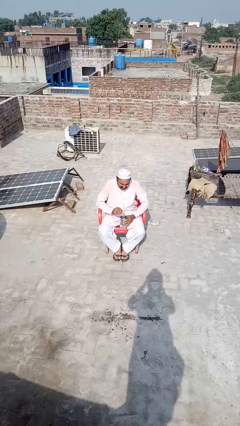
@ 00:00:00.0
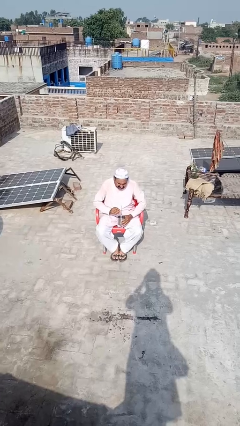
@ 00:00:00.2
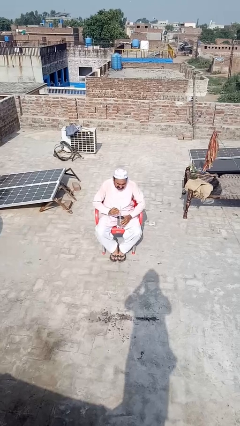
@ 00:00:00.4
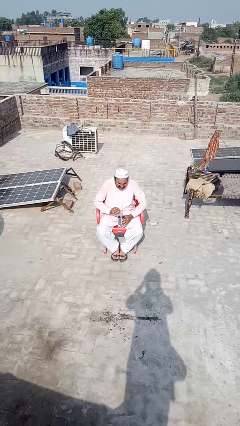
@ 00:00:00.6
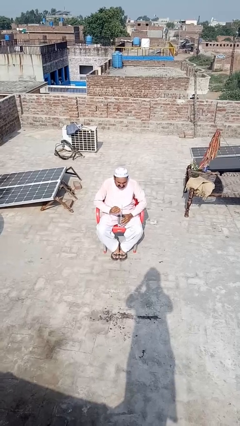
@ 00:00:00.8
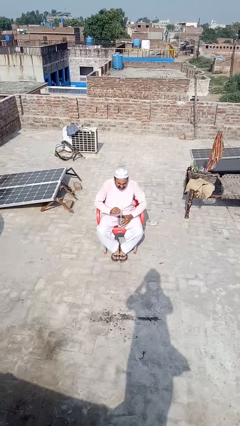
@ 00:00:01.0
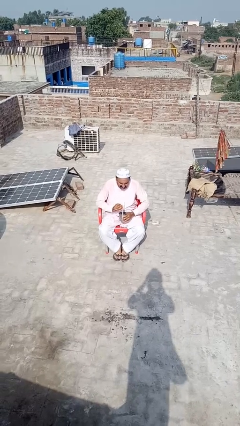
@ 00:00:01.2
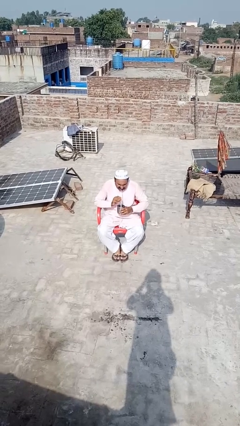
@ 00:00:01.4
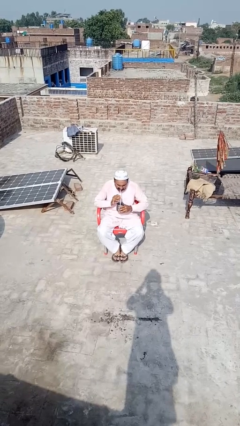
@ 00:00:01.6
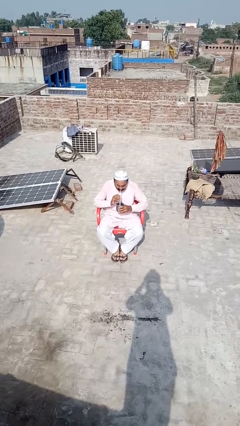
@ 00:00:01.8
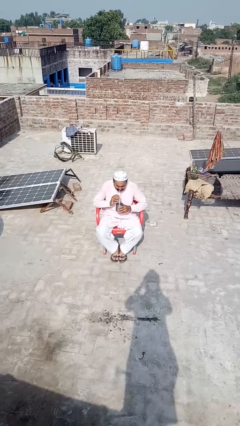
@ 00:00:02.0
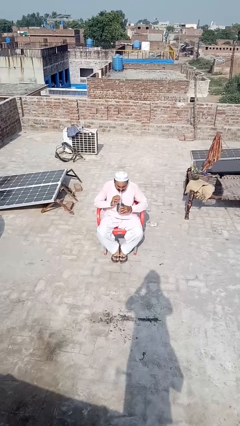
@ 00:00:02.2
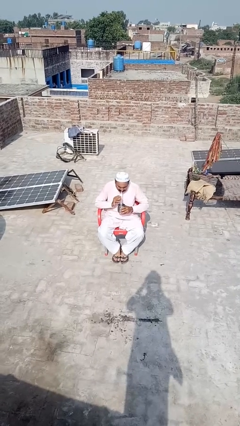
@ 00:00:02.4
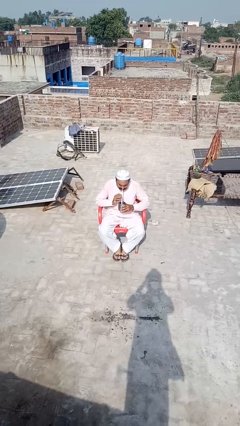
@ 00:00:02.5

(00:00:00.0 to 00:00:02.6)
person drinks from straw

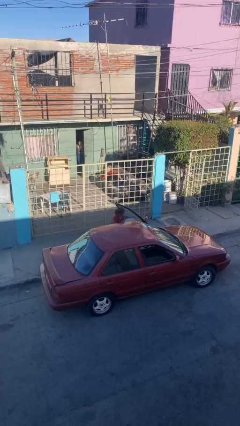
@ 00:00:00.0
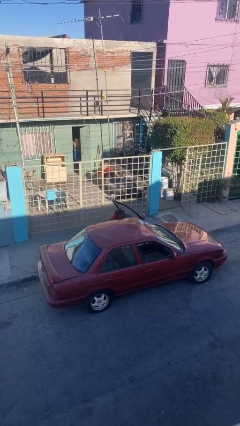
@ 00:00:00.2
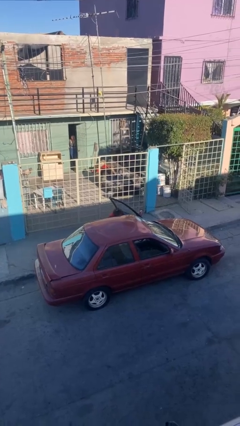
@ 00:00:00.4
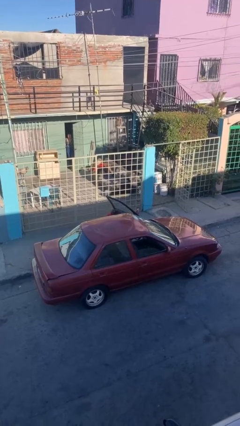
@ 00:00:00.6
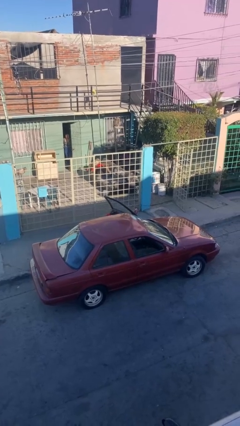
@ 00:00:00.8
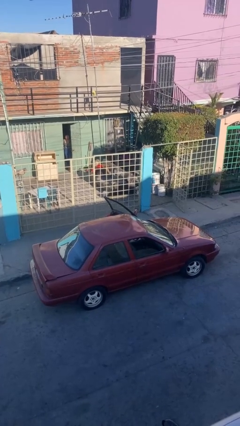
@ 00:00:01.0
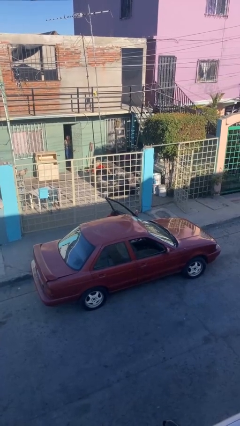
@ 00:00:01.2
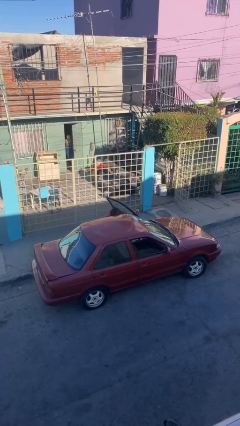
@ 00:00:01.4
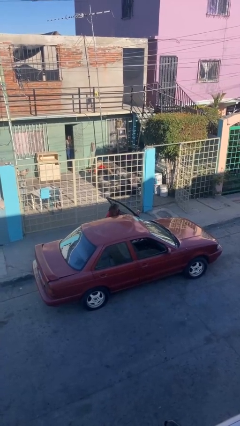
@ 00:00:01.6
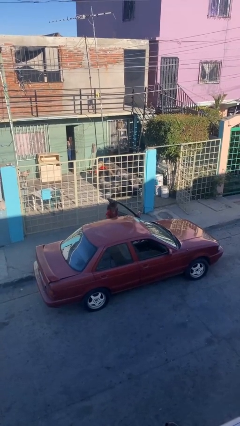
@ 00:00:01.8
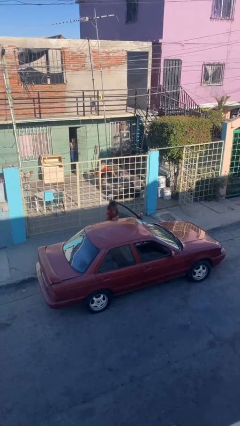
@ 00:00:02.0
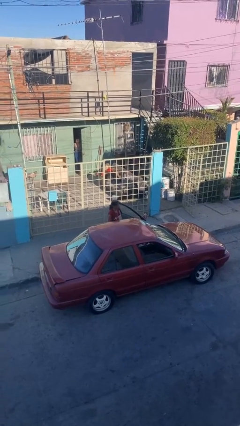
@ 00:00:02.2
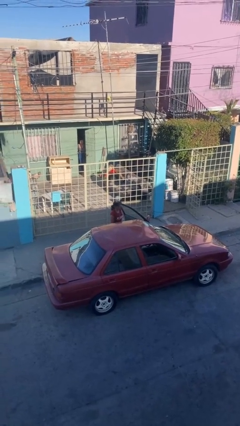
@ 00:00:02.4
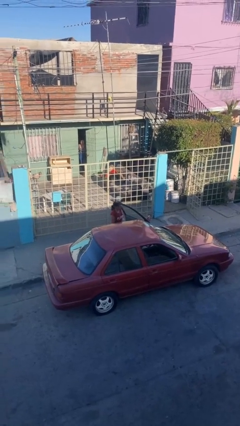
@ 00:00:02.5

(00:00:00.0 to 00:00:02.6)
person loads car

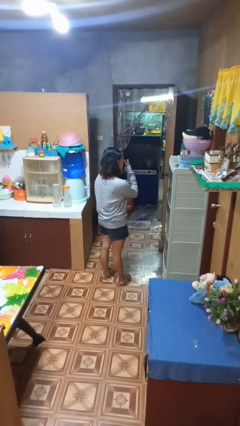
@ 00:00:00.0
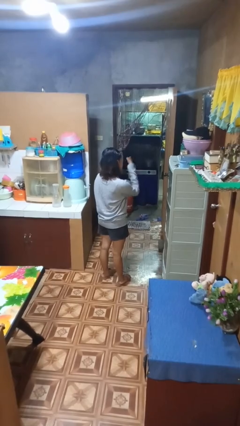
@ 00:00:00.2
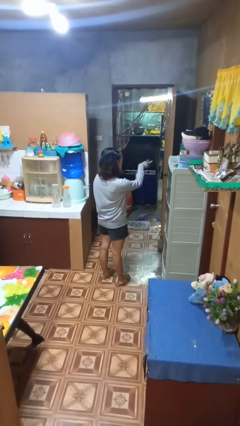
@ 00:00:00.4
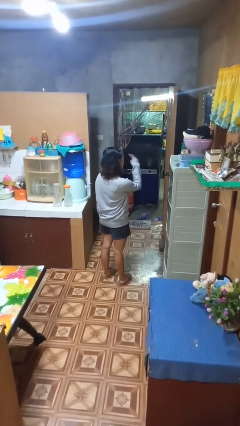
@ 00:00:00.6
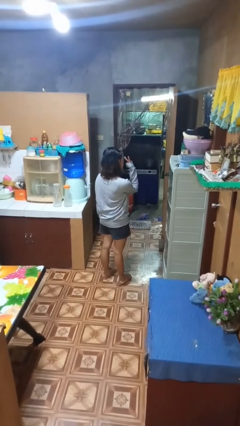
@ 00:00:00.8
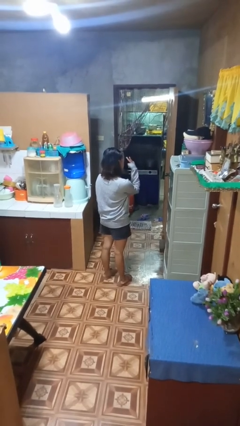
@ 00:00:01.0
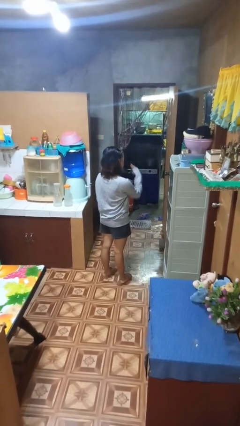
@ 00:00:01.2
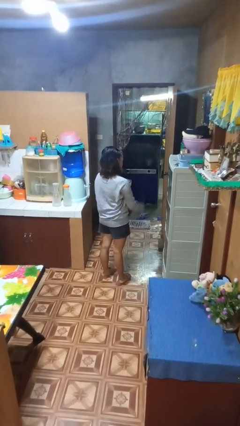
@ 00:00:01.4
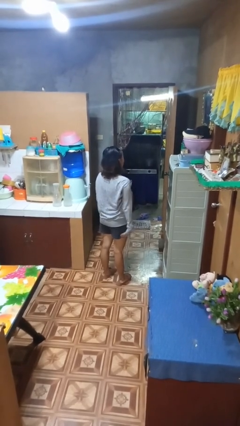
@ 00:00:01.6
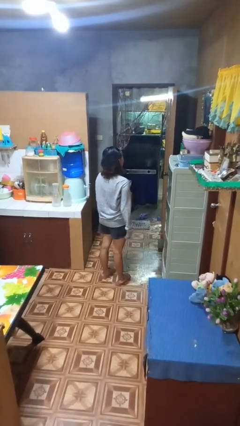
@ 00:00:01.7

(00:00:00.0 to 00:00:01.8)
person gestures watch closely

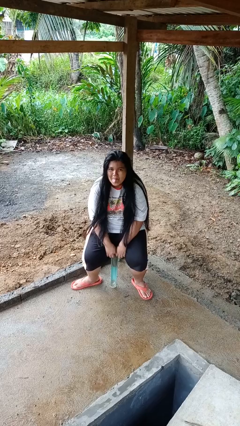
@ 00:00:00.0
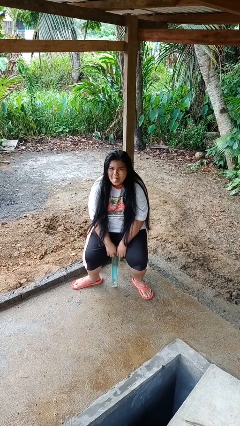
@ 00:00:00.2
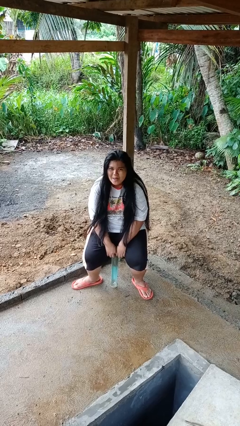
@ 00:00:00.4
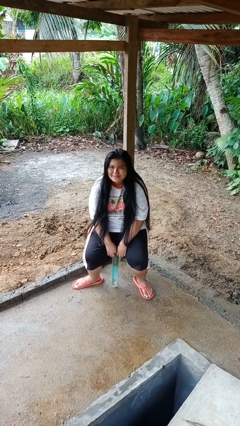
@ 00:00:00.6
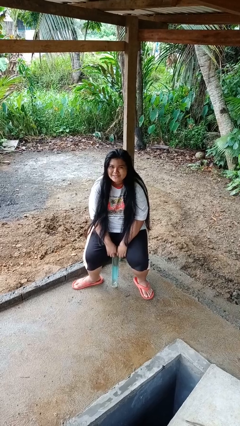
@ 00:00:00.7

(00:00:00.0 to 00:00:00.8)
person sticks out tongue

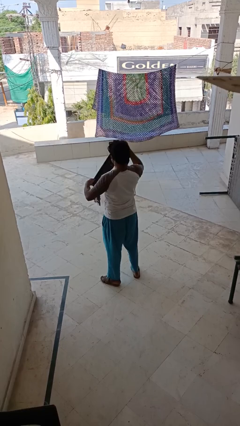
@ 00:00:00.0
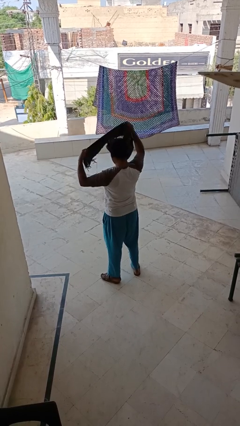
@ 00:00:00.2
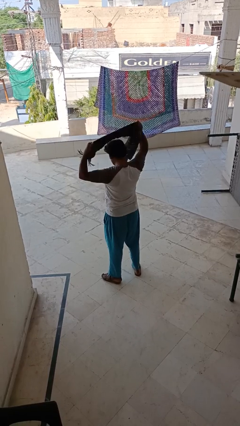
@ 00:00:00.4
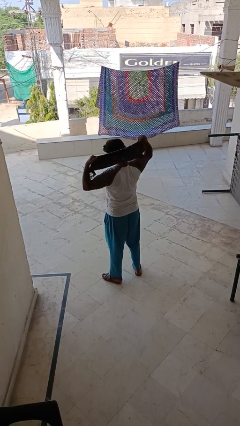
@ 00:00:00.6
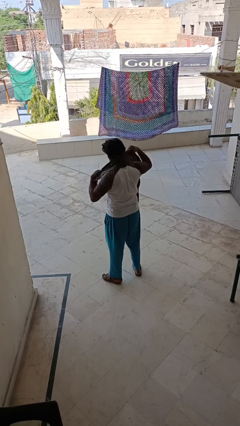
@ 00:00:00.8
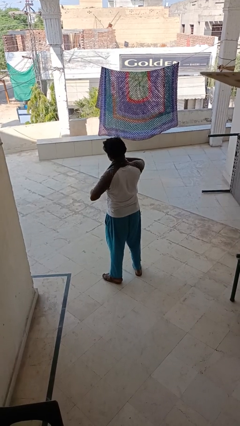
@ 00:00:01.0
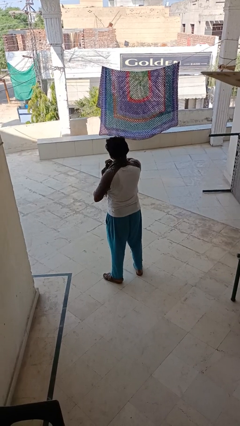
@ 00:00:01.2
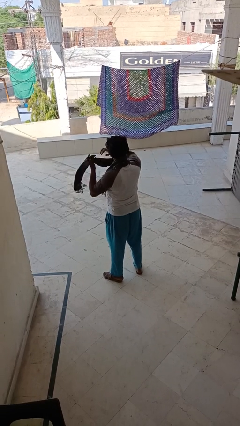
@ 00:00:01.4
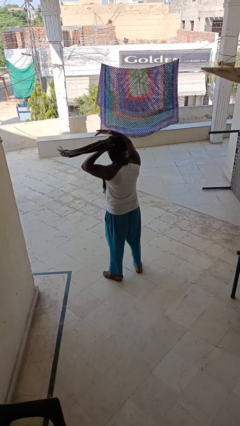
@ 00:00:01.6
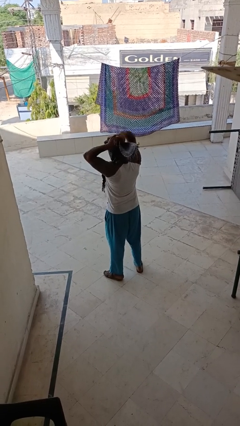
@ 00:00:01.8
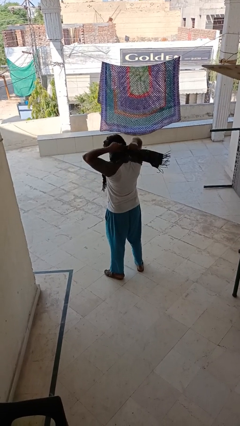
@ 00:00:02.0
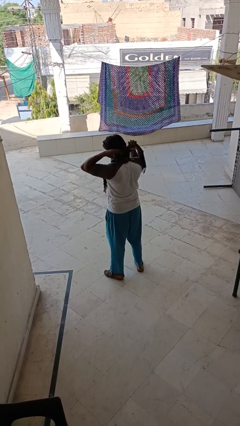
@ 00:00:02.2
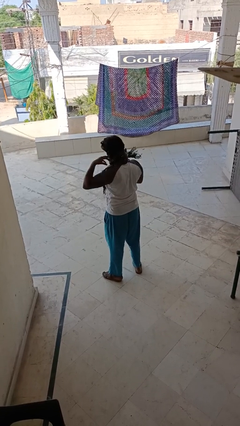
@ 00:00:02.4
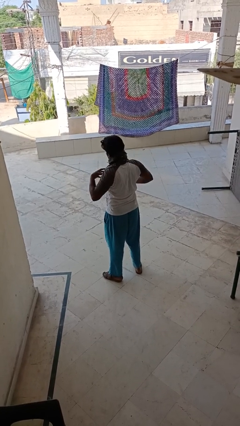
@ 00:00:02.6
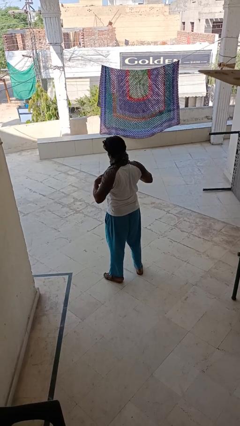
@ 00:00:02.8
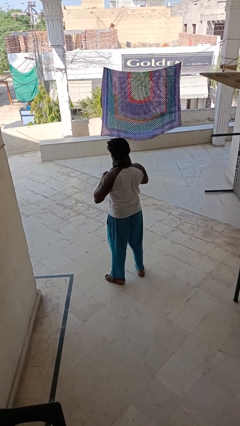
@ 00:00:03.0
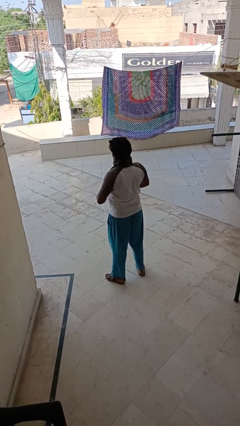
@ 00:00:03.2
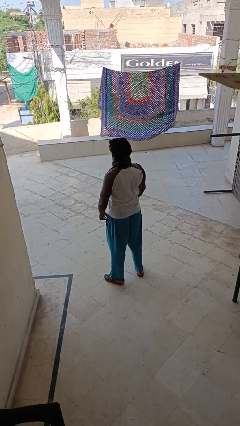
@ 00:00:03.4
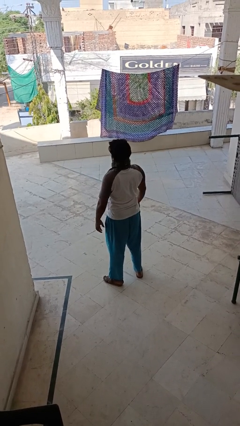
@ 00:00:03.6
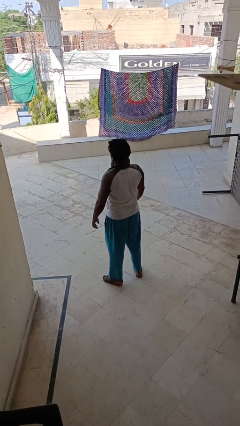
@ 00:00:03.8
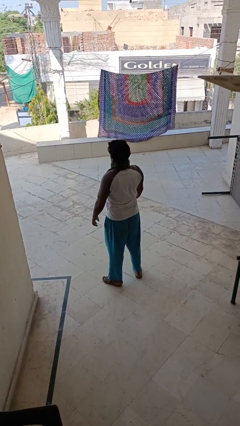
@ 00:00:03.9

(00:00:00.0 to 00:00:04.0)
person puts on scarf

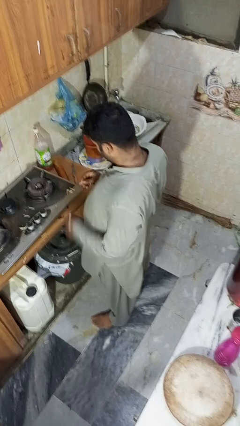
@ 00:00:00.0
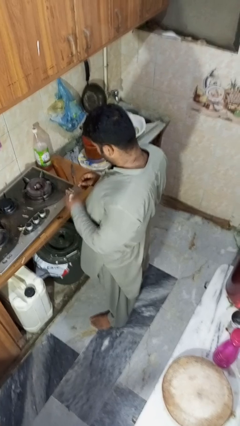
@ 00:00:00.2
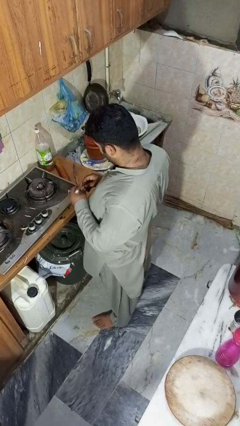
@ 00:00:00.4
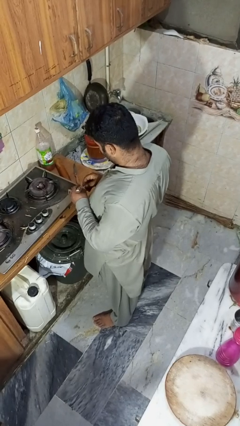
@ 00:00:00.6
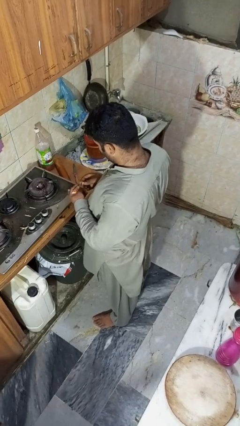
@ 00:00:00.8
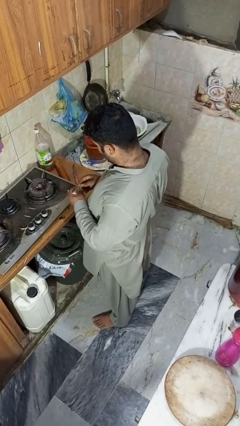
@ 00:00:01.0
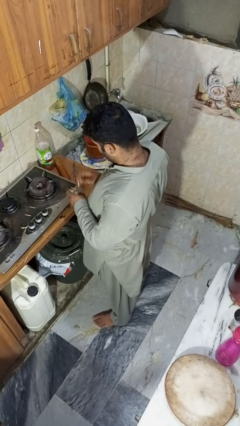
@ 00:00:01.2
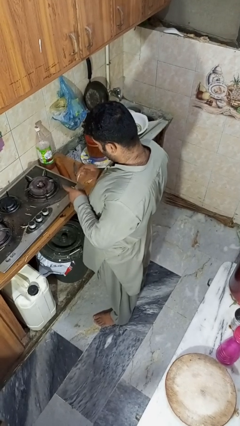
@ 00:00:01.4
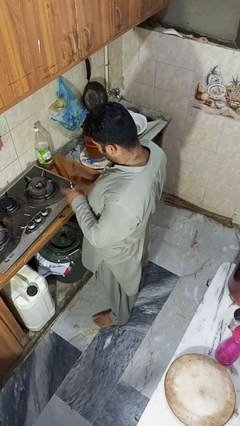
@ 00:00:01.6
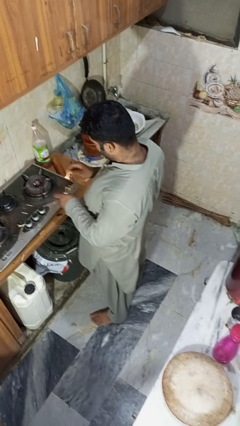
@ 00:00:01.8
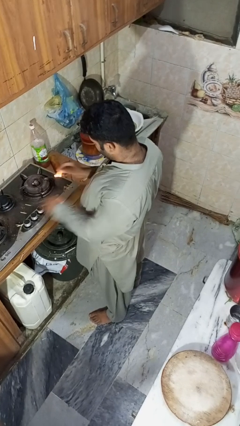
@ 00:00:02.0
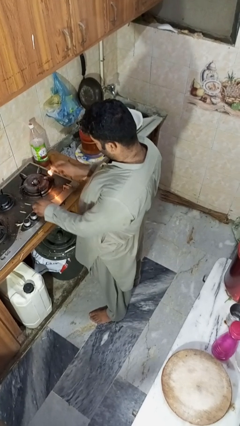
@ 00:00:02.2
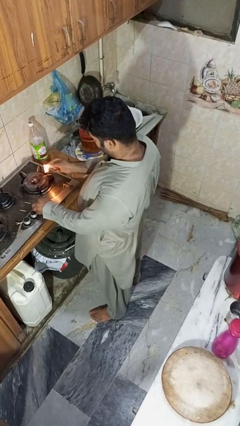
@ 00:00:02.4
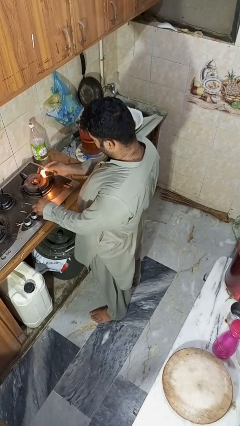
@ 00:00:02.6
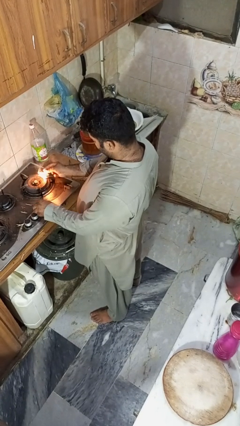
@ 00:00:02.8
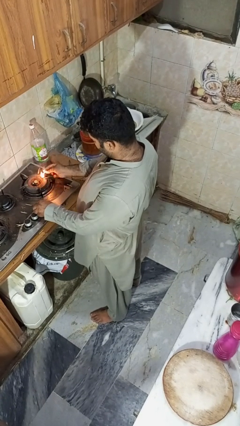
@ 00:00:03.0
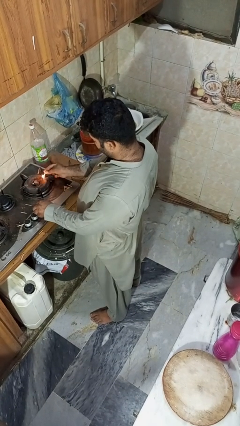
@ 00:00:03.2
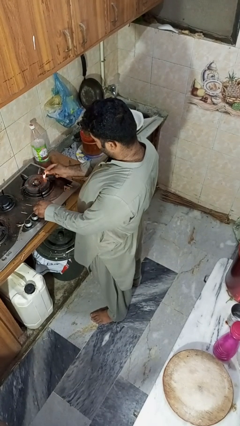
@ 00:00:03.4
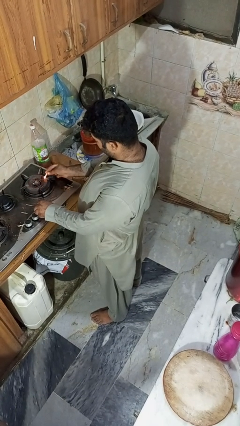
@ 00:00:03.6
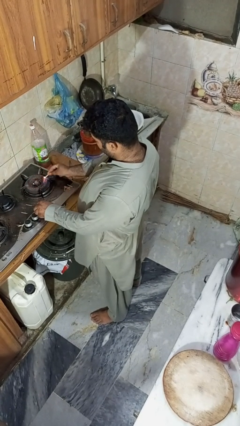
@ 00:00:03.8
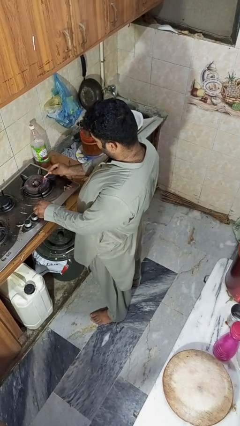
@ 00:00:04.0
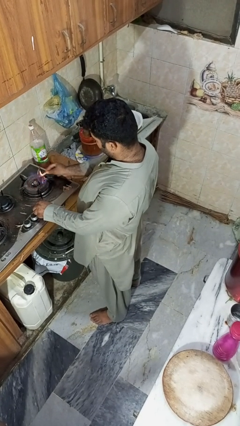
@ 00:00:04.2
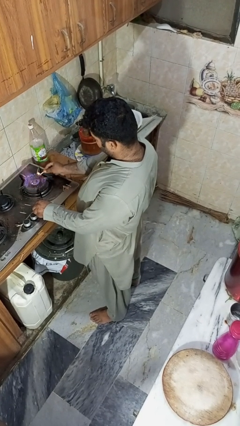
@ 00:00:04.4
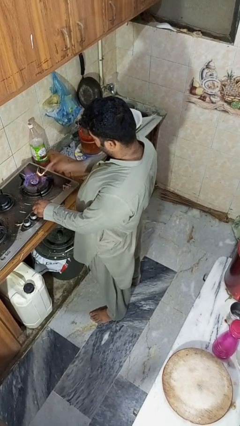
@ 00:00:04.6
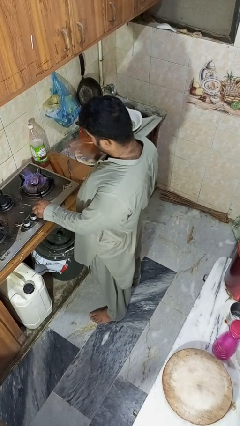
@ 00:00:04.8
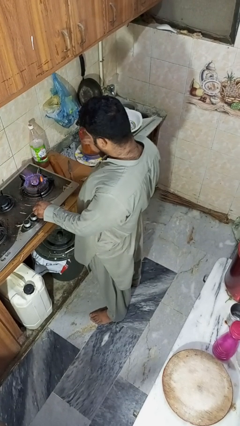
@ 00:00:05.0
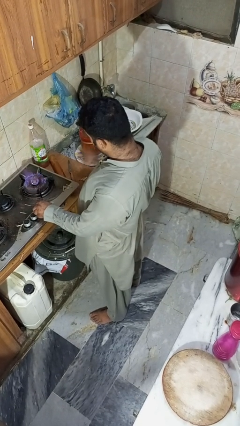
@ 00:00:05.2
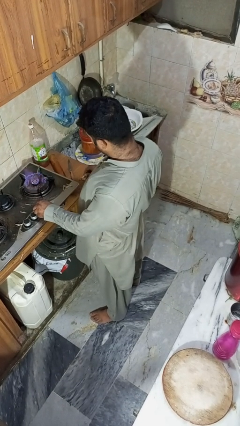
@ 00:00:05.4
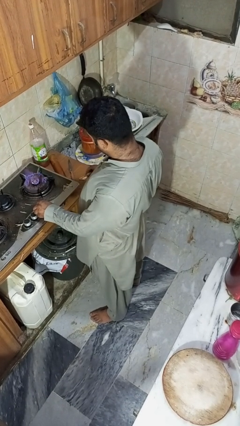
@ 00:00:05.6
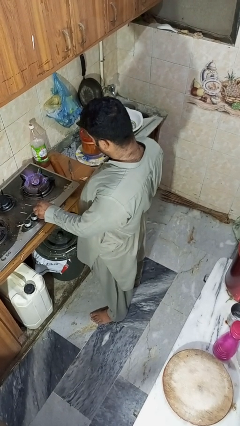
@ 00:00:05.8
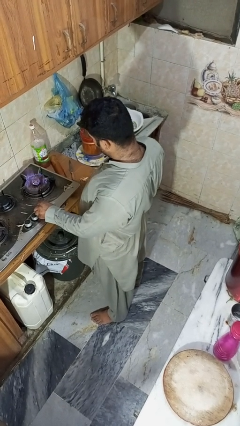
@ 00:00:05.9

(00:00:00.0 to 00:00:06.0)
person turns on stovetop
